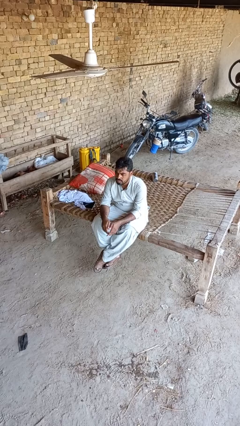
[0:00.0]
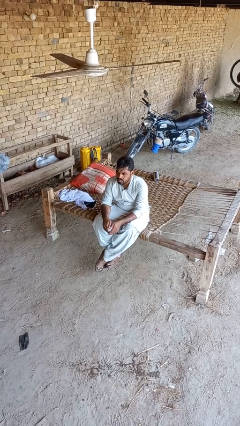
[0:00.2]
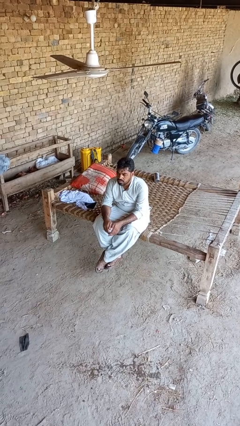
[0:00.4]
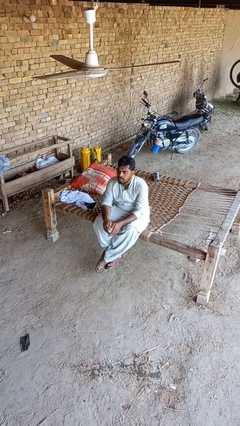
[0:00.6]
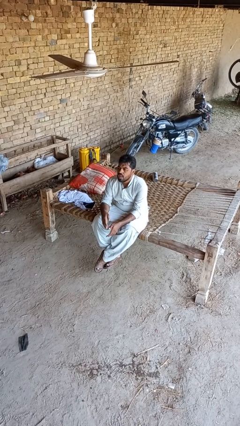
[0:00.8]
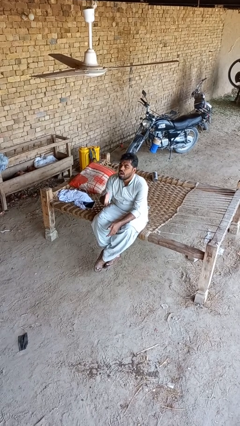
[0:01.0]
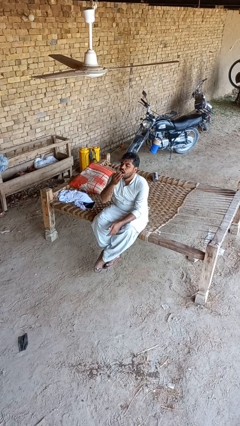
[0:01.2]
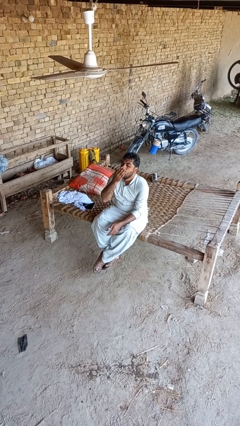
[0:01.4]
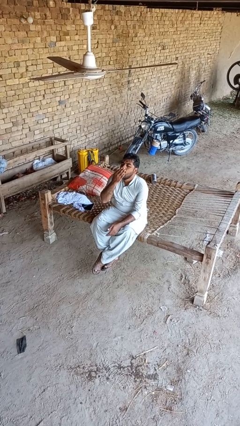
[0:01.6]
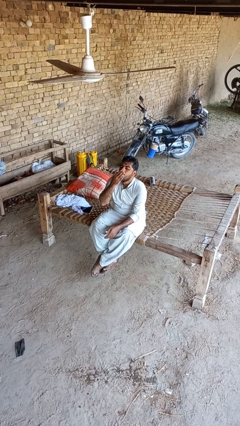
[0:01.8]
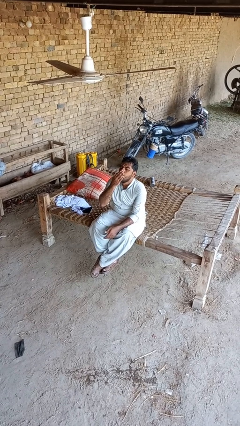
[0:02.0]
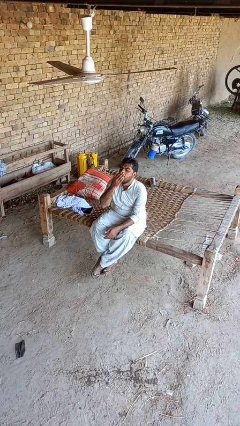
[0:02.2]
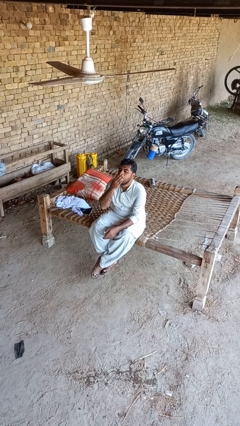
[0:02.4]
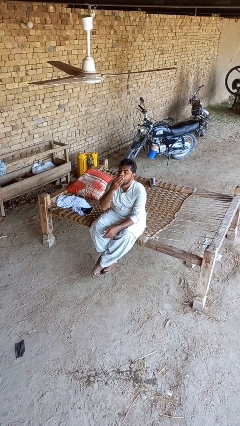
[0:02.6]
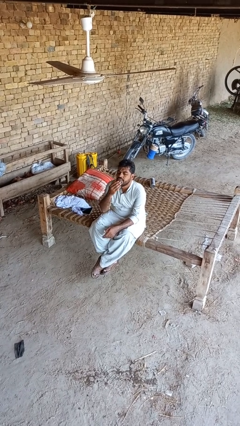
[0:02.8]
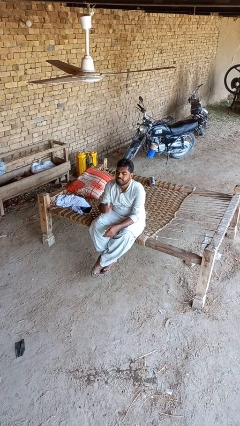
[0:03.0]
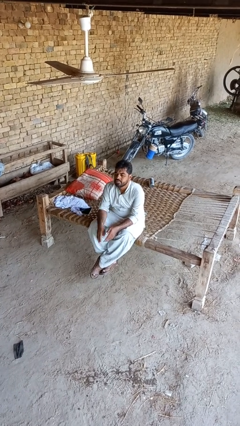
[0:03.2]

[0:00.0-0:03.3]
person yawns

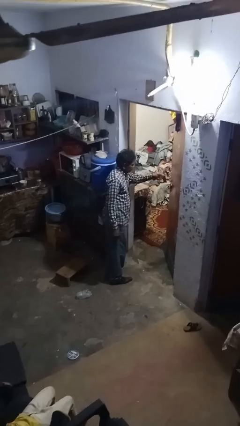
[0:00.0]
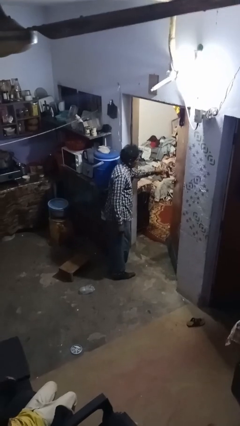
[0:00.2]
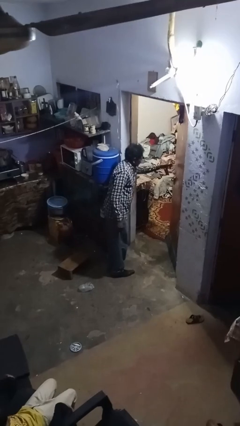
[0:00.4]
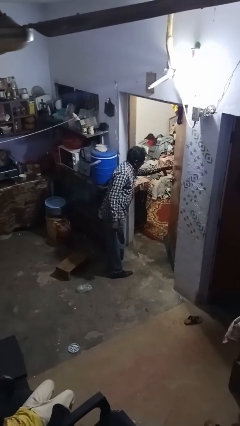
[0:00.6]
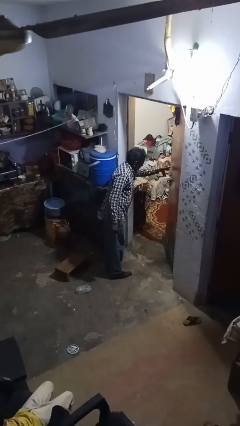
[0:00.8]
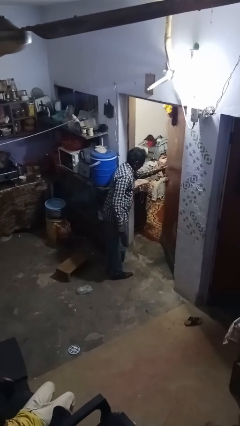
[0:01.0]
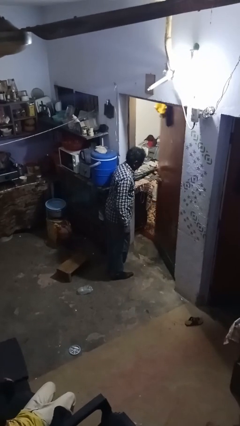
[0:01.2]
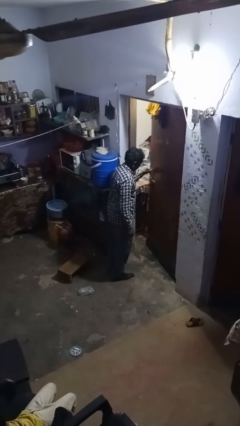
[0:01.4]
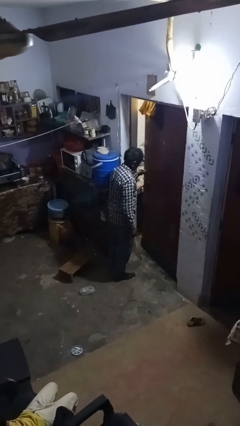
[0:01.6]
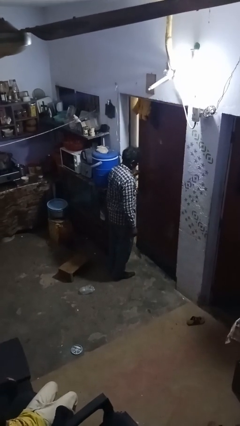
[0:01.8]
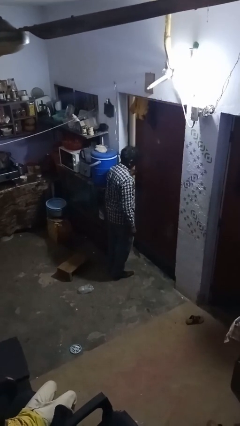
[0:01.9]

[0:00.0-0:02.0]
person closes facility door

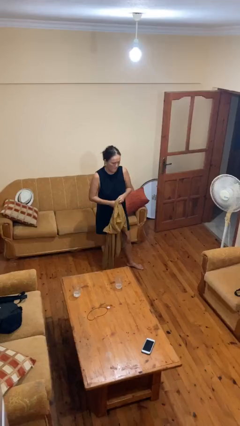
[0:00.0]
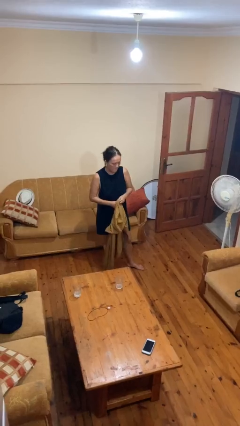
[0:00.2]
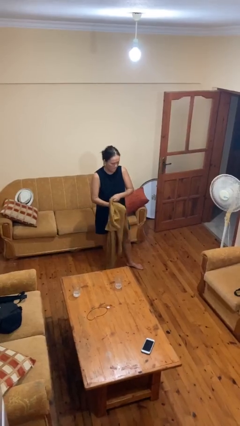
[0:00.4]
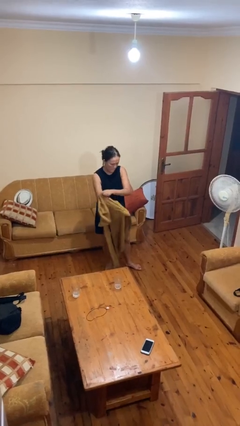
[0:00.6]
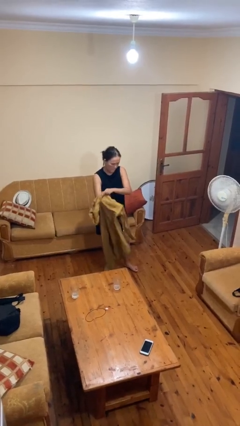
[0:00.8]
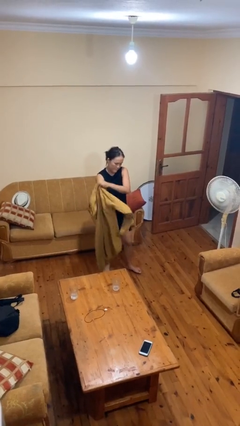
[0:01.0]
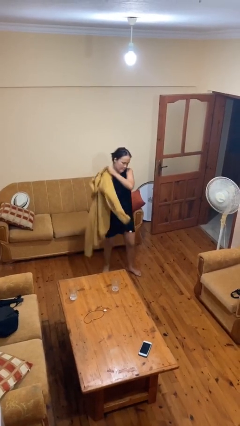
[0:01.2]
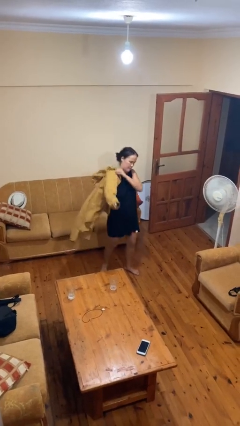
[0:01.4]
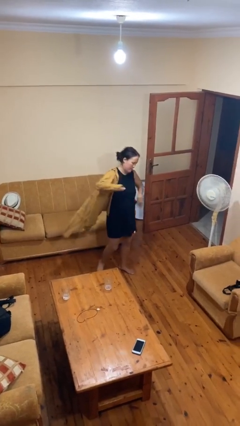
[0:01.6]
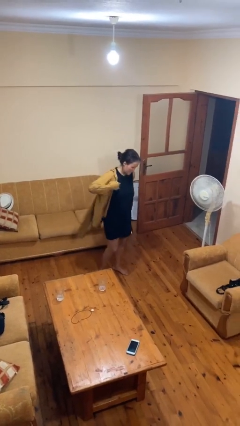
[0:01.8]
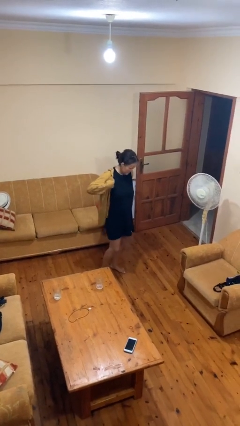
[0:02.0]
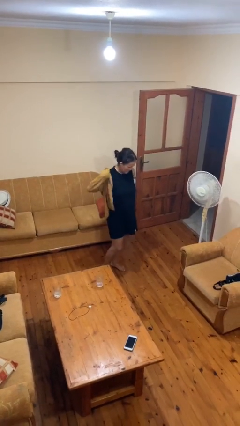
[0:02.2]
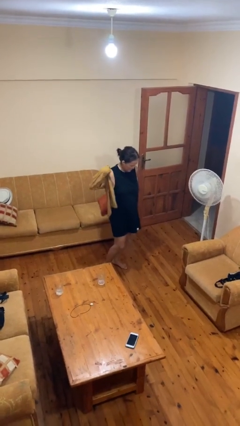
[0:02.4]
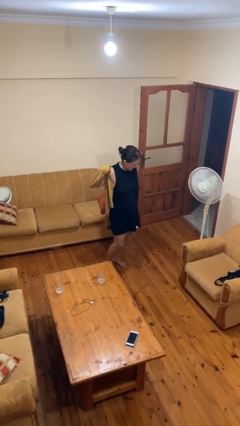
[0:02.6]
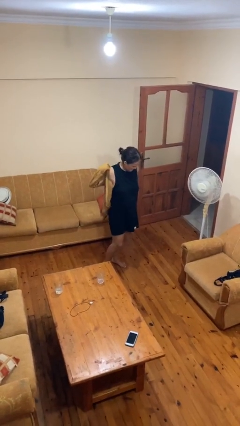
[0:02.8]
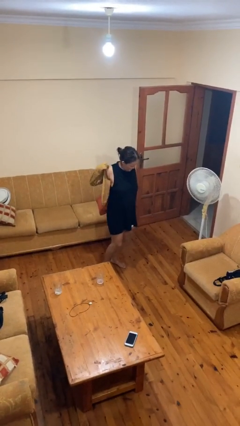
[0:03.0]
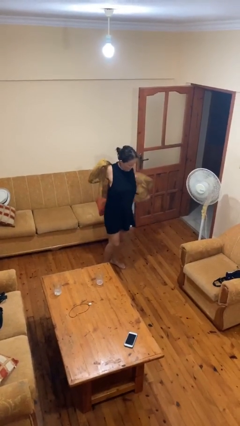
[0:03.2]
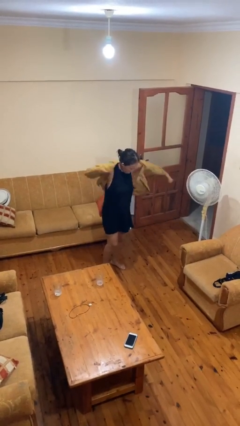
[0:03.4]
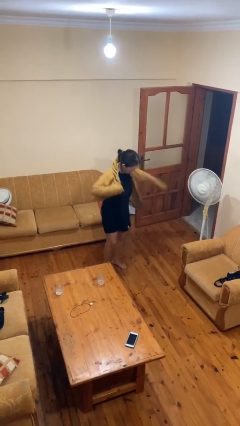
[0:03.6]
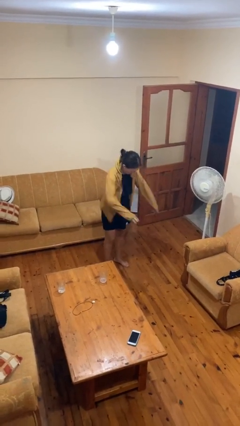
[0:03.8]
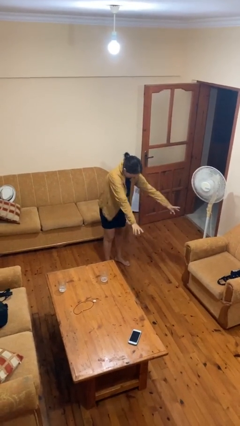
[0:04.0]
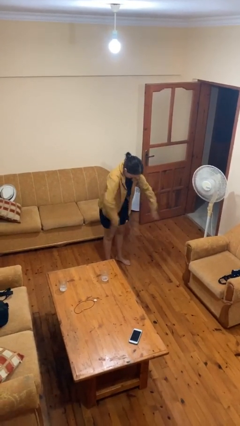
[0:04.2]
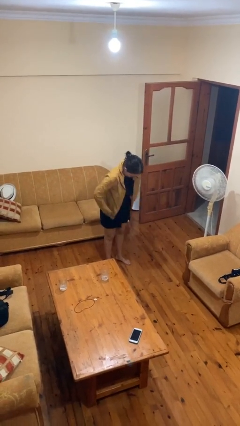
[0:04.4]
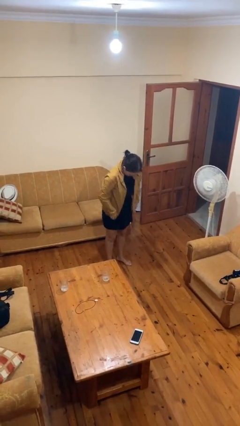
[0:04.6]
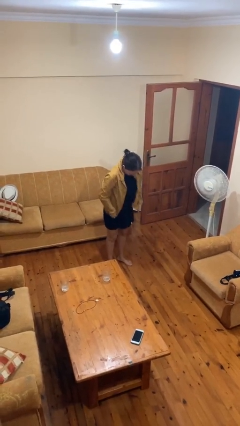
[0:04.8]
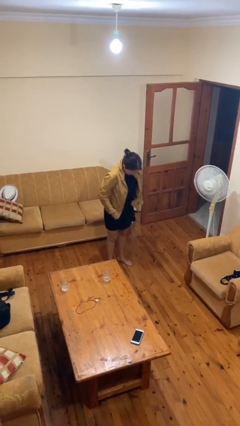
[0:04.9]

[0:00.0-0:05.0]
person puts on jacket

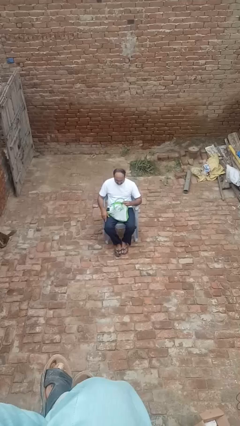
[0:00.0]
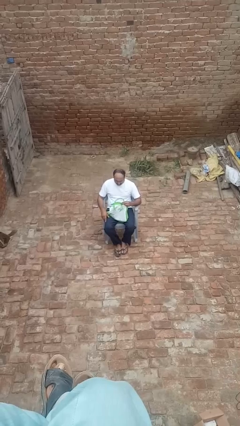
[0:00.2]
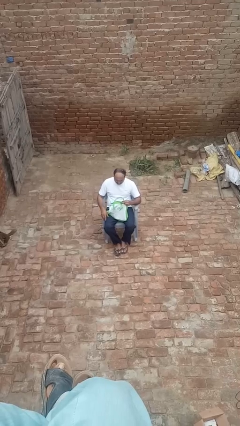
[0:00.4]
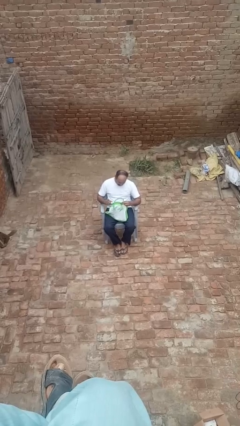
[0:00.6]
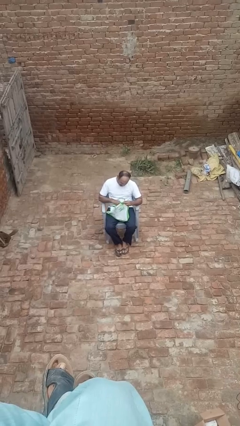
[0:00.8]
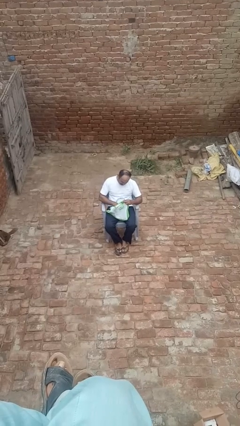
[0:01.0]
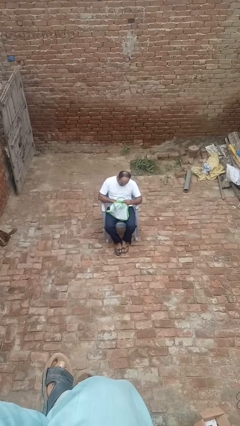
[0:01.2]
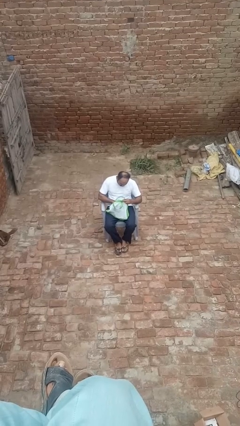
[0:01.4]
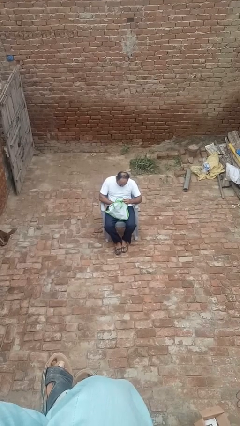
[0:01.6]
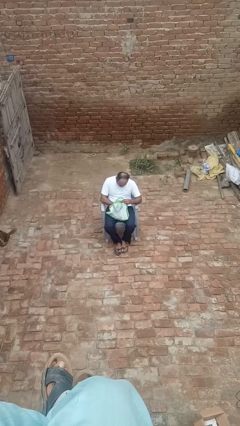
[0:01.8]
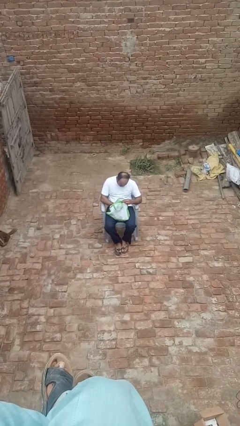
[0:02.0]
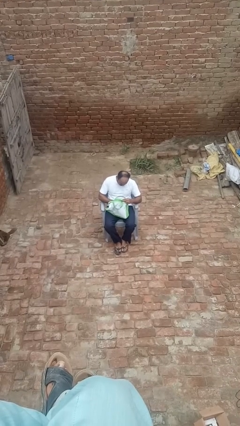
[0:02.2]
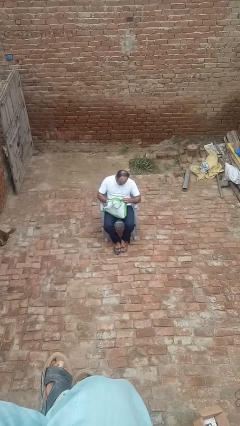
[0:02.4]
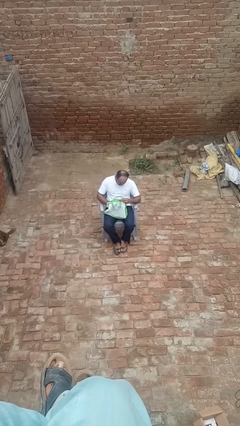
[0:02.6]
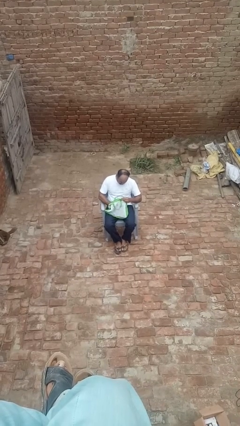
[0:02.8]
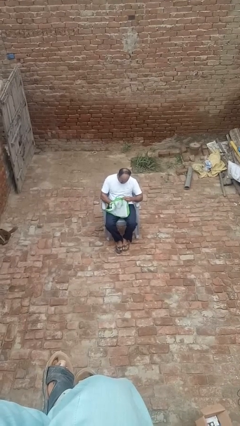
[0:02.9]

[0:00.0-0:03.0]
person searches in bag

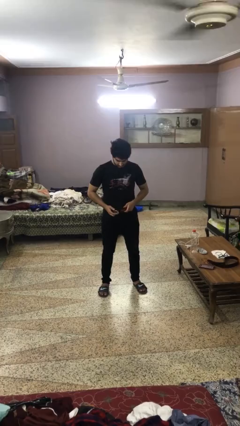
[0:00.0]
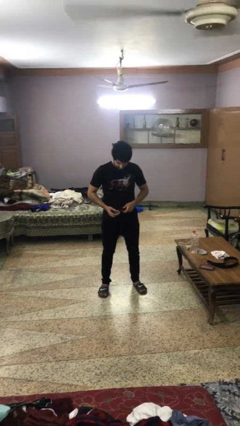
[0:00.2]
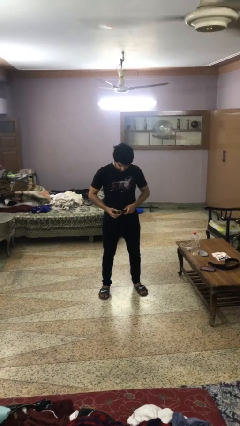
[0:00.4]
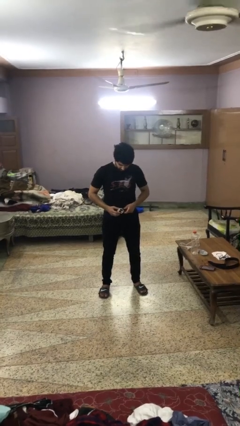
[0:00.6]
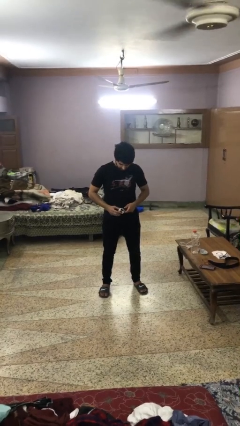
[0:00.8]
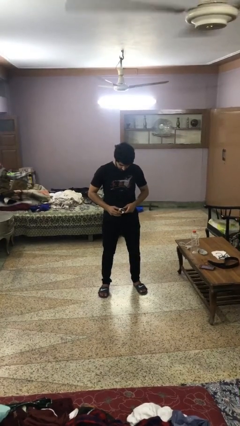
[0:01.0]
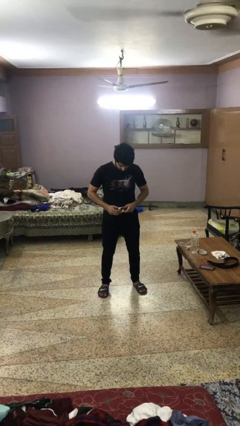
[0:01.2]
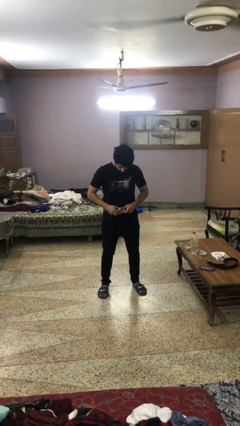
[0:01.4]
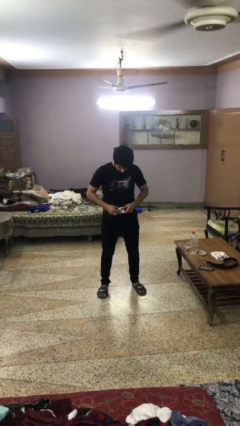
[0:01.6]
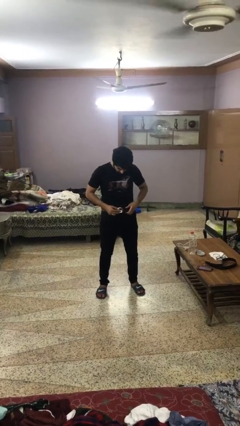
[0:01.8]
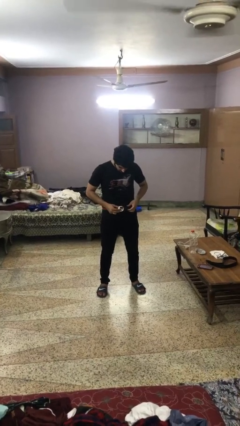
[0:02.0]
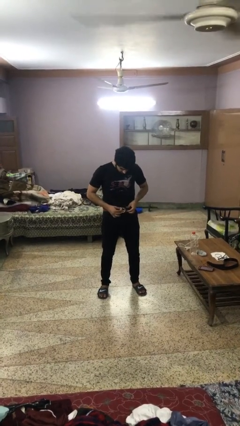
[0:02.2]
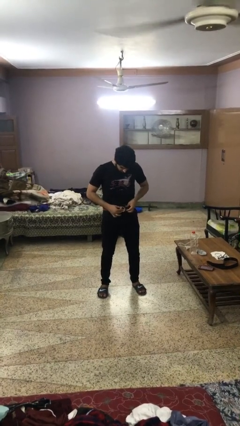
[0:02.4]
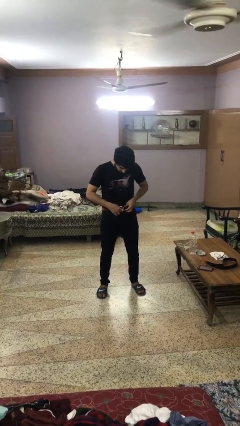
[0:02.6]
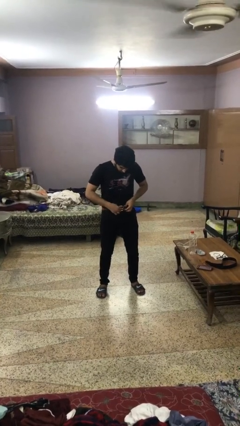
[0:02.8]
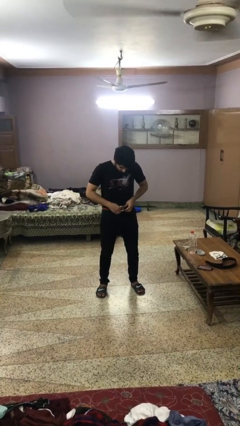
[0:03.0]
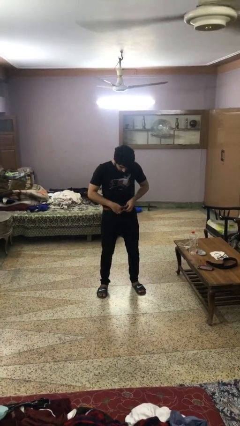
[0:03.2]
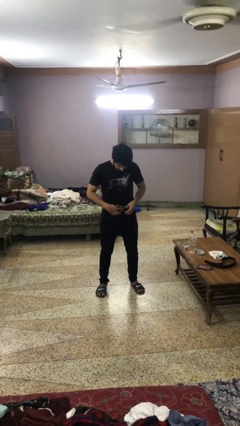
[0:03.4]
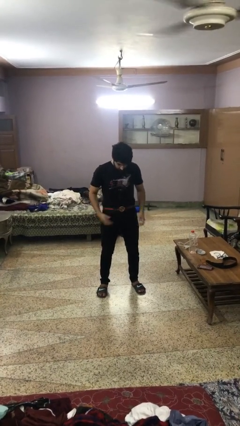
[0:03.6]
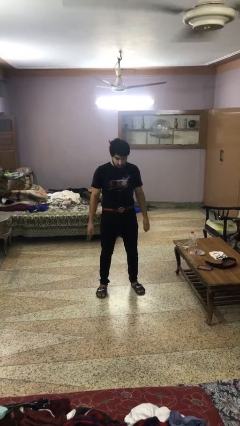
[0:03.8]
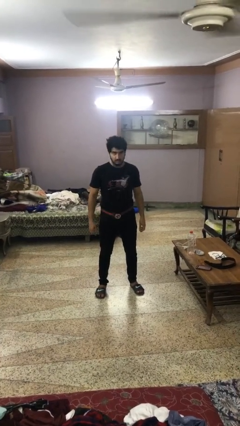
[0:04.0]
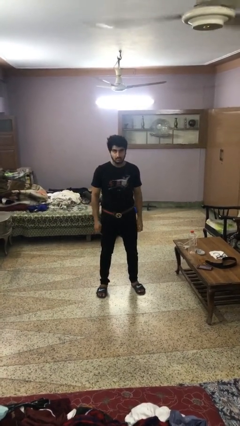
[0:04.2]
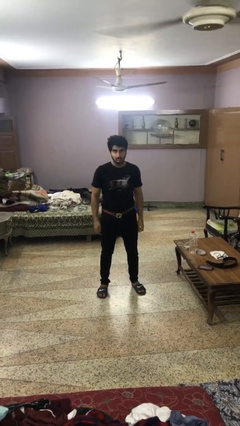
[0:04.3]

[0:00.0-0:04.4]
person puts on belt
